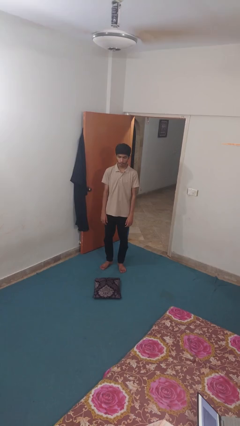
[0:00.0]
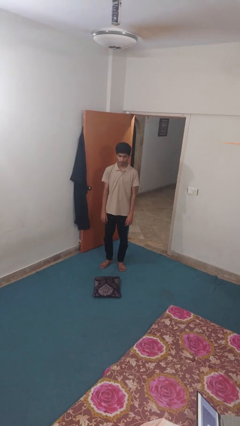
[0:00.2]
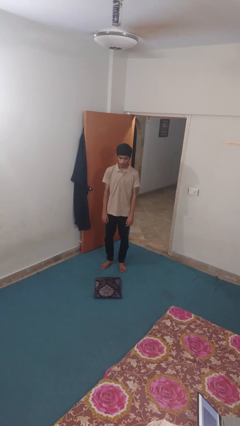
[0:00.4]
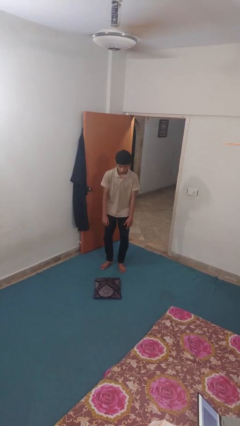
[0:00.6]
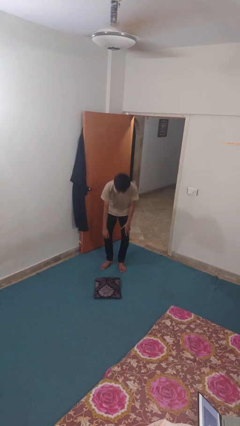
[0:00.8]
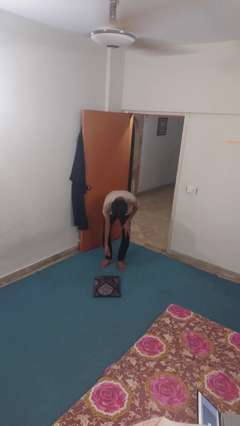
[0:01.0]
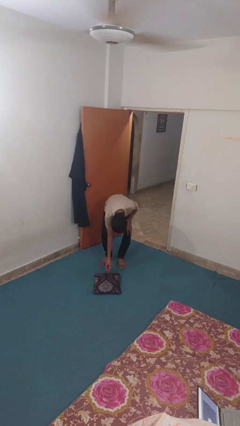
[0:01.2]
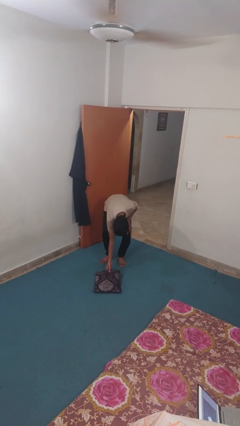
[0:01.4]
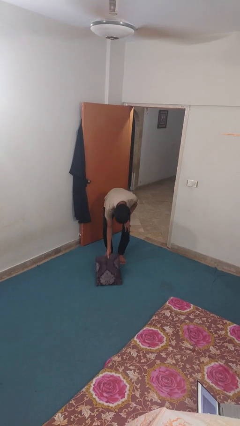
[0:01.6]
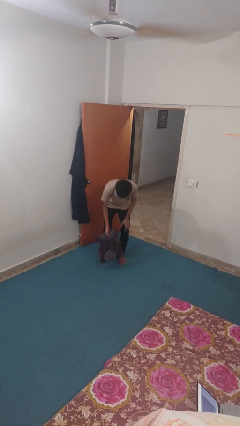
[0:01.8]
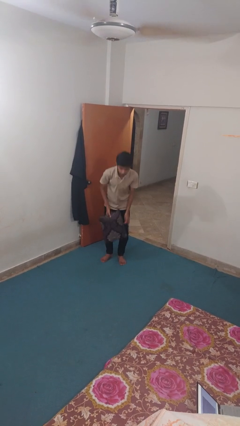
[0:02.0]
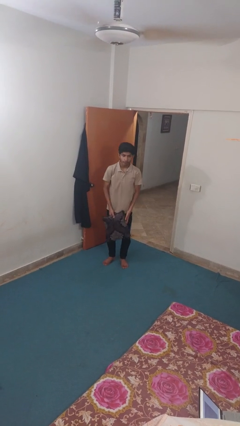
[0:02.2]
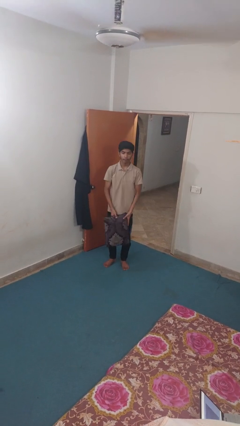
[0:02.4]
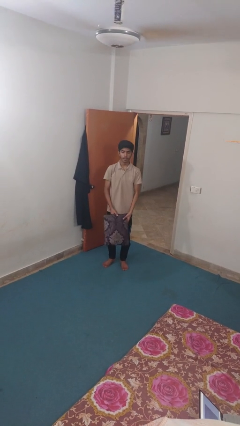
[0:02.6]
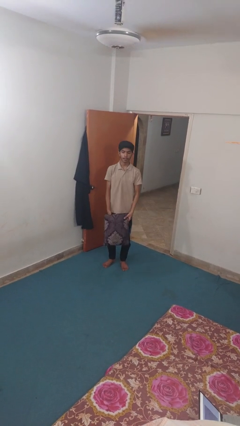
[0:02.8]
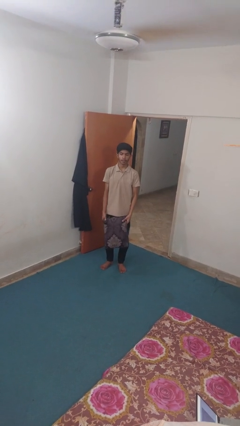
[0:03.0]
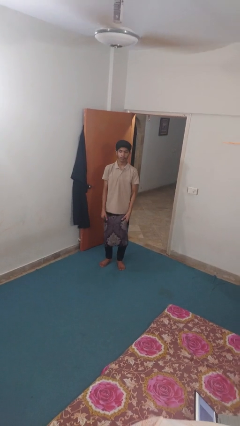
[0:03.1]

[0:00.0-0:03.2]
person picks up object from floor

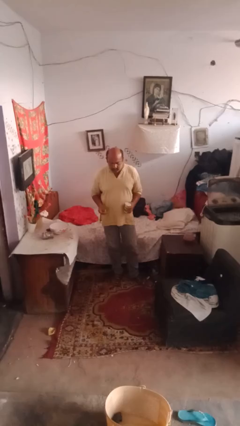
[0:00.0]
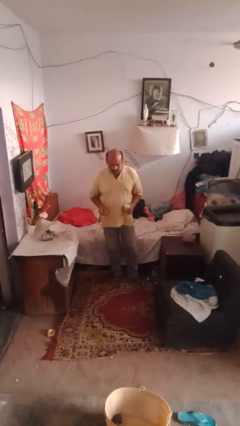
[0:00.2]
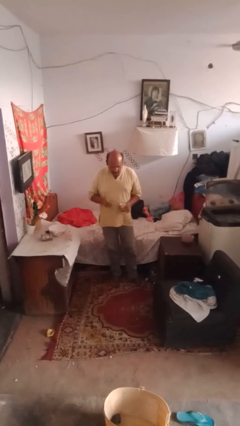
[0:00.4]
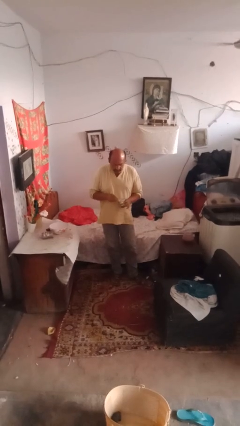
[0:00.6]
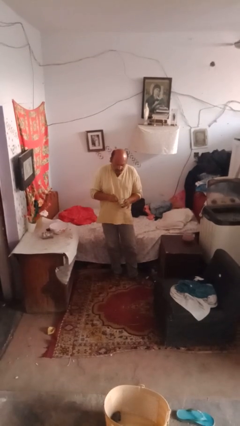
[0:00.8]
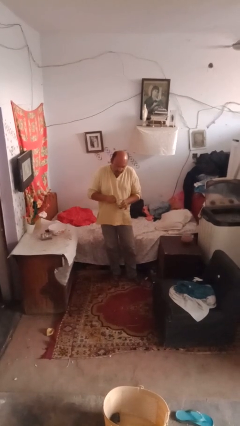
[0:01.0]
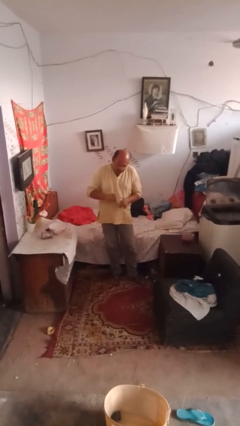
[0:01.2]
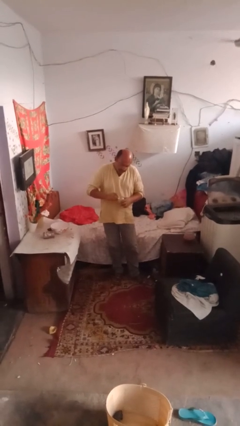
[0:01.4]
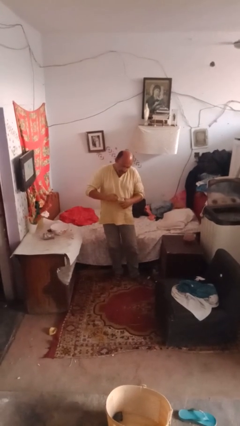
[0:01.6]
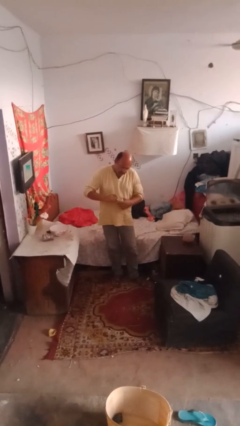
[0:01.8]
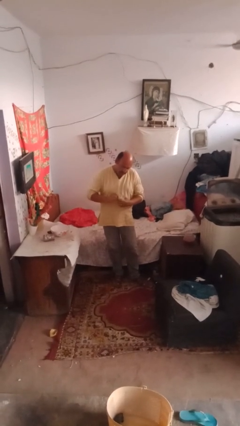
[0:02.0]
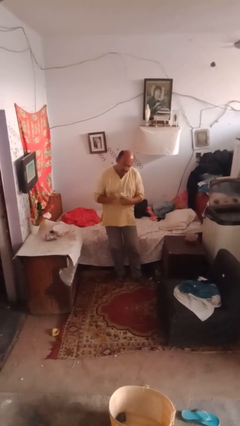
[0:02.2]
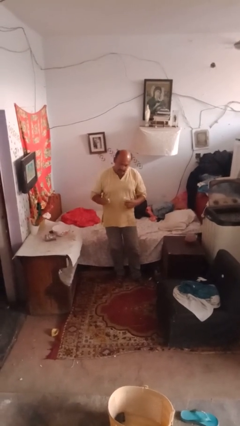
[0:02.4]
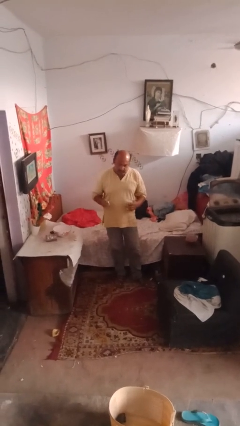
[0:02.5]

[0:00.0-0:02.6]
person opens can with can opener

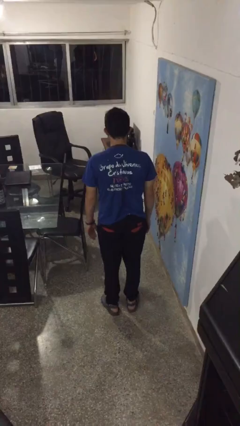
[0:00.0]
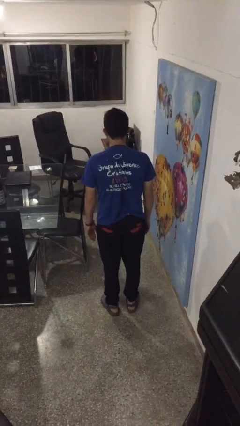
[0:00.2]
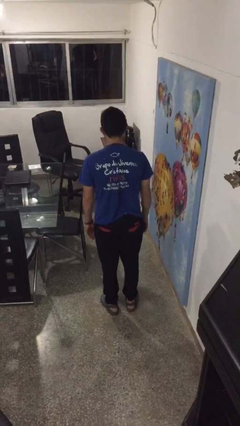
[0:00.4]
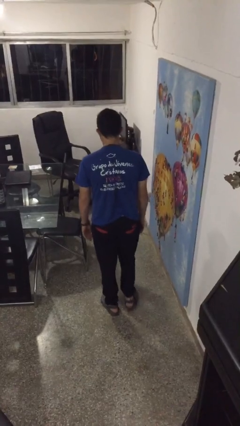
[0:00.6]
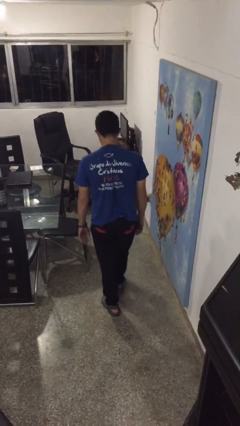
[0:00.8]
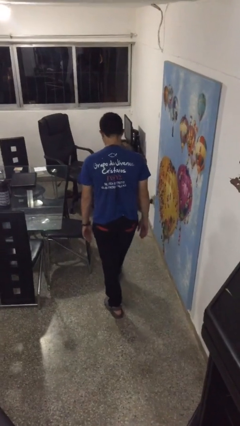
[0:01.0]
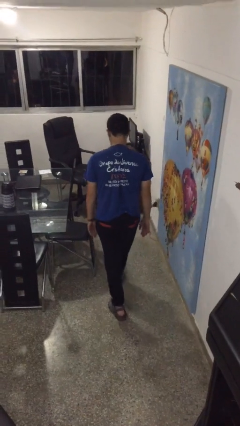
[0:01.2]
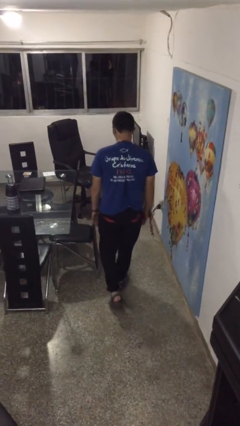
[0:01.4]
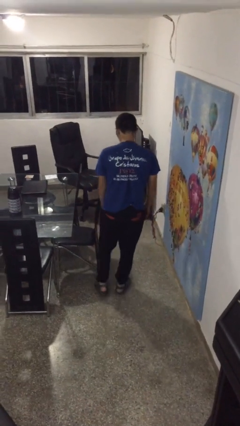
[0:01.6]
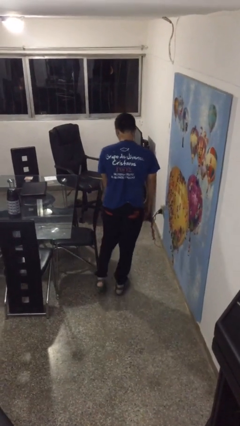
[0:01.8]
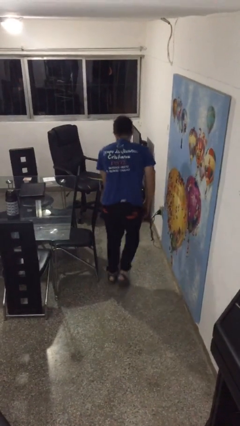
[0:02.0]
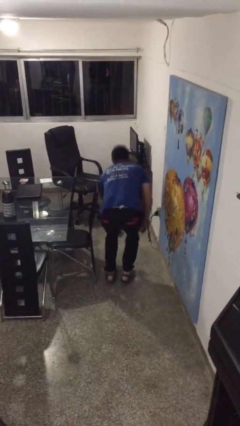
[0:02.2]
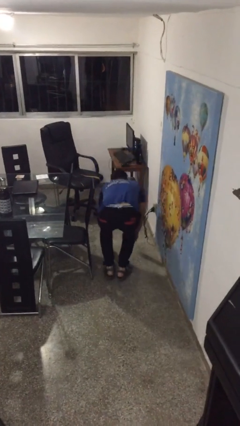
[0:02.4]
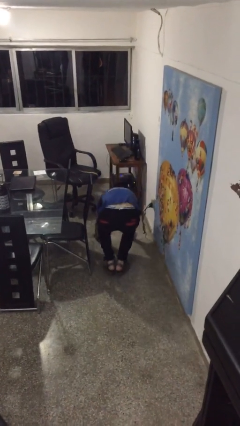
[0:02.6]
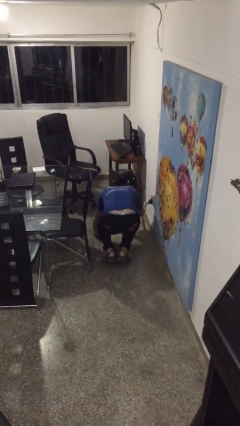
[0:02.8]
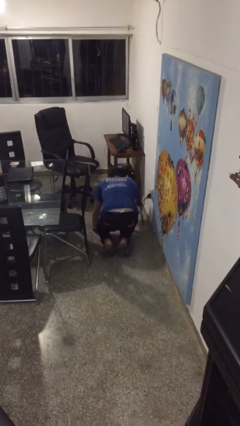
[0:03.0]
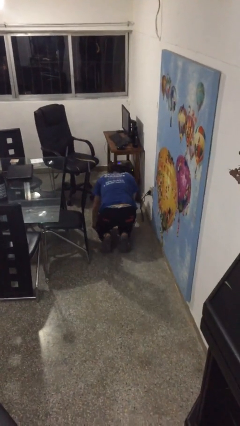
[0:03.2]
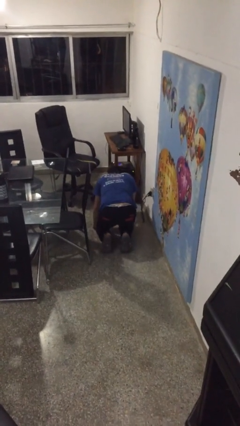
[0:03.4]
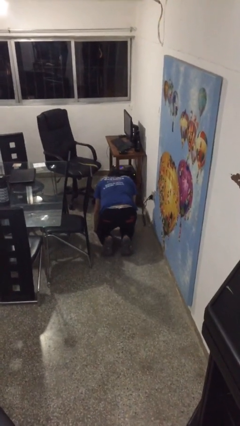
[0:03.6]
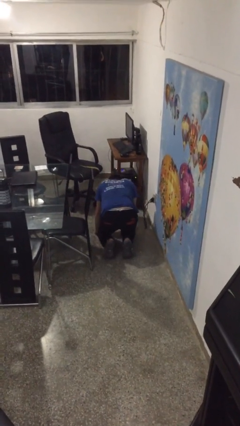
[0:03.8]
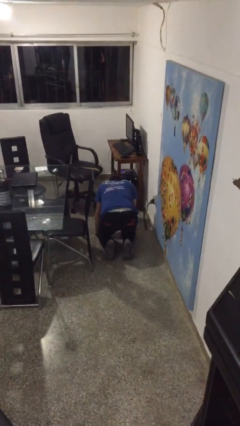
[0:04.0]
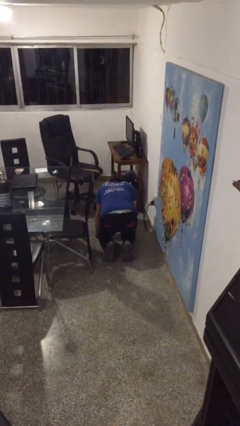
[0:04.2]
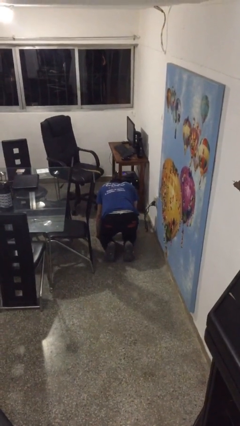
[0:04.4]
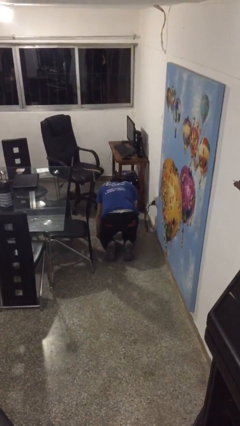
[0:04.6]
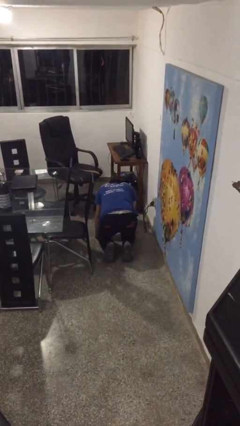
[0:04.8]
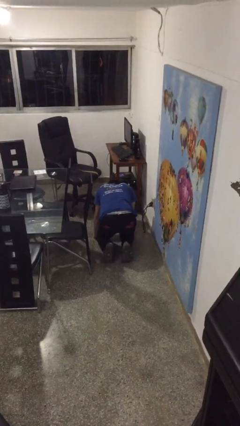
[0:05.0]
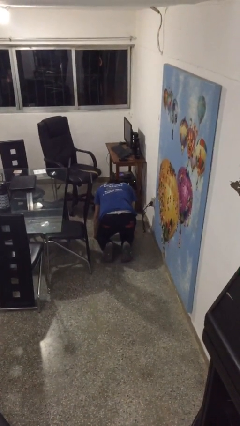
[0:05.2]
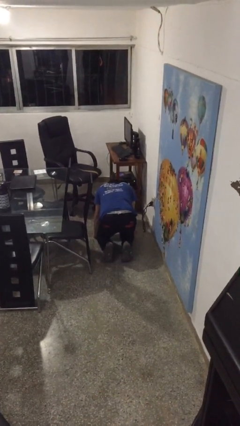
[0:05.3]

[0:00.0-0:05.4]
person trips on object on floor

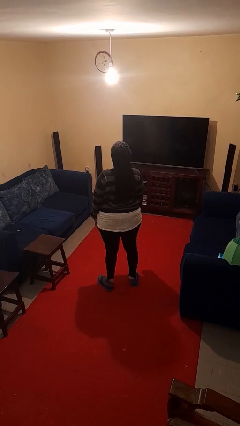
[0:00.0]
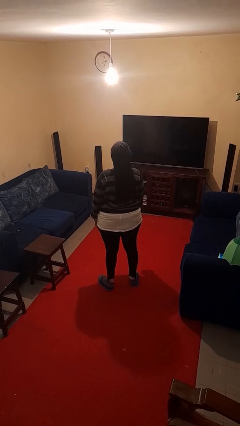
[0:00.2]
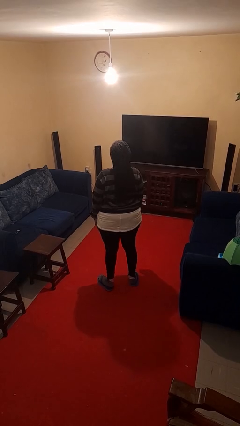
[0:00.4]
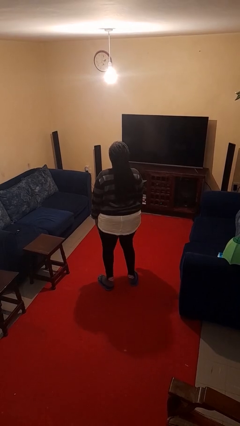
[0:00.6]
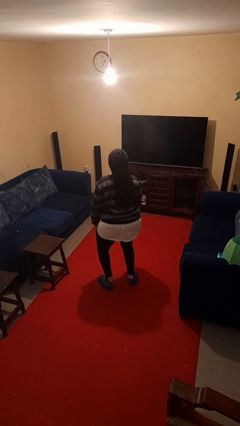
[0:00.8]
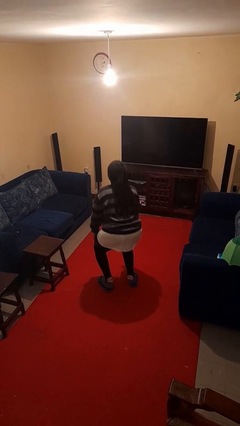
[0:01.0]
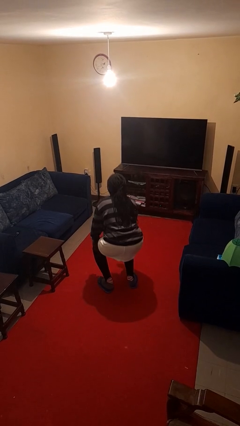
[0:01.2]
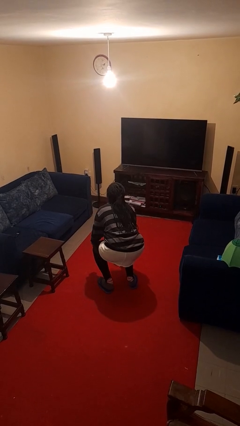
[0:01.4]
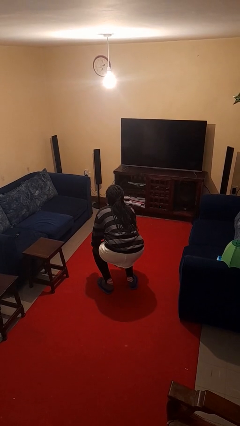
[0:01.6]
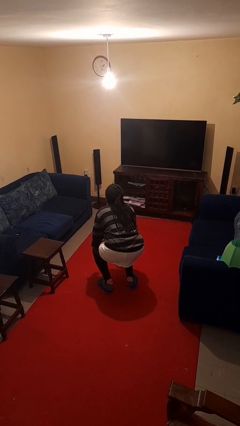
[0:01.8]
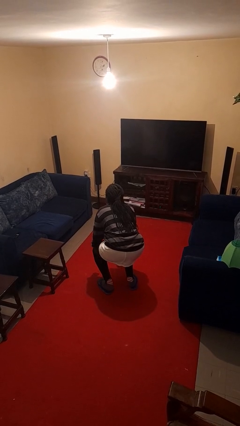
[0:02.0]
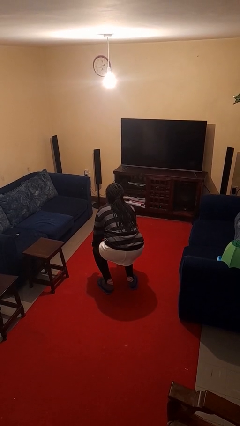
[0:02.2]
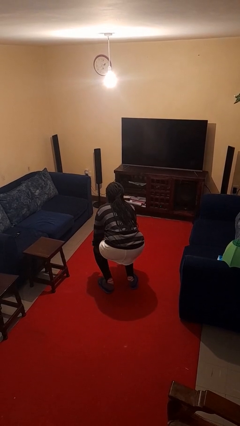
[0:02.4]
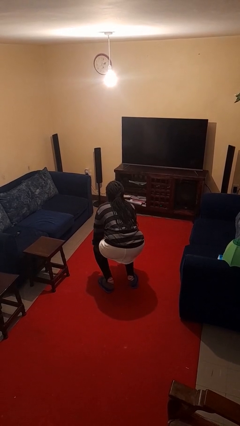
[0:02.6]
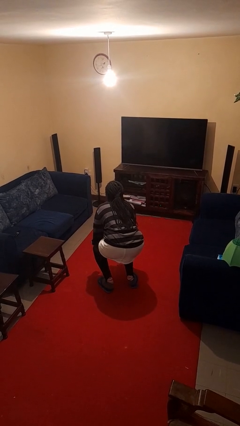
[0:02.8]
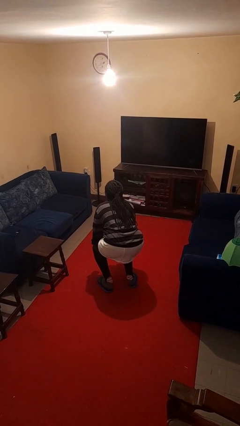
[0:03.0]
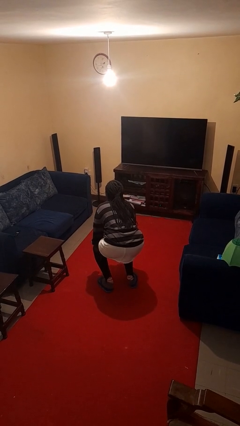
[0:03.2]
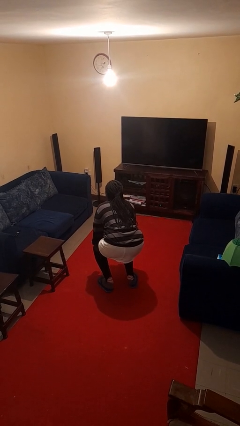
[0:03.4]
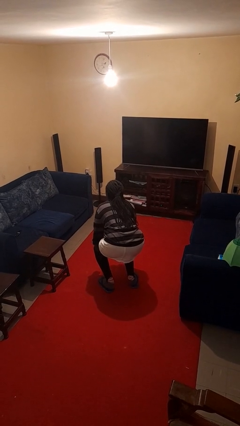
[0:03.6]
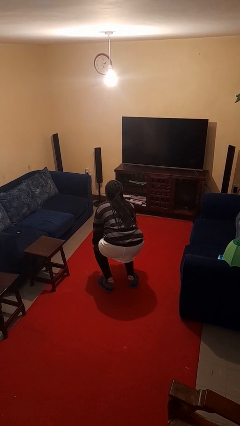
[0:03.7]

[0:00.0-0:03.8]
person squats

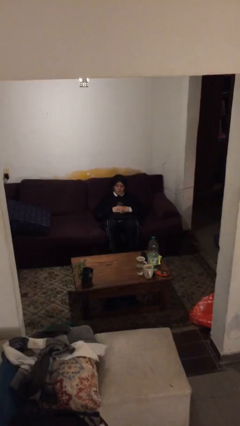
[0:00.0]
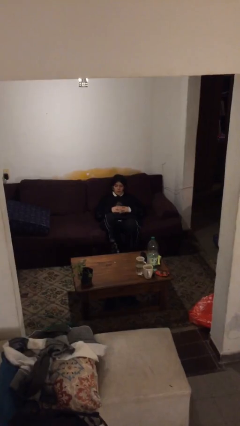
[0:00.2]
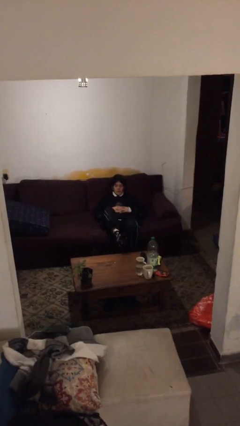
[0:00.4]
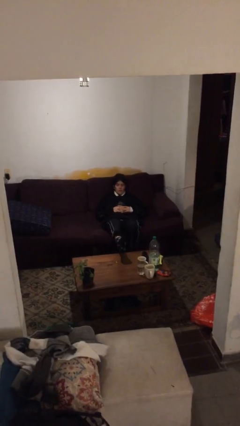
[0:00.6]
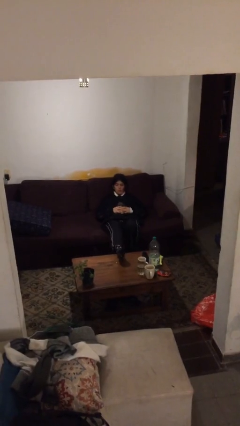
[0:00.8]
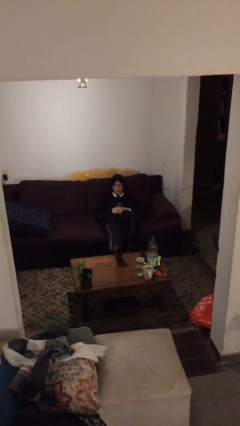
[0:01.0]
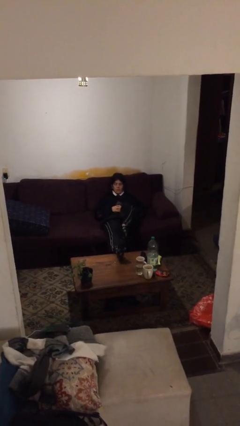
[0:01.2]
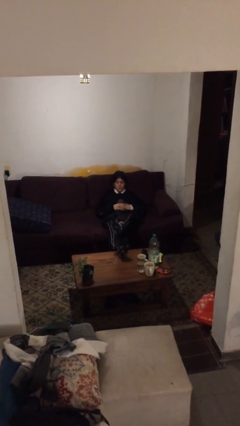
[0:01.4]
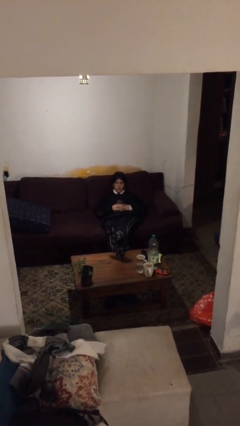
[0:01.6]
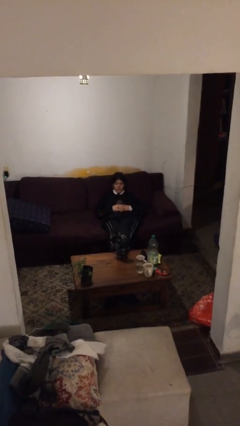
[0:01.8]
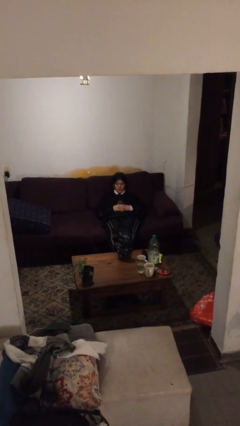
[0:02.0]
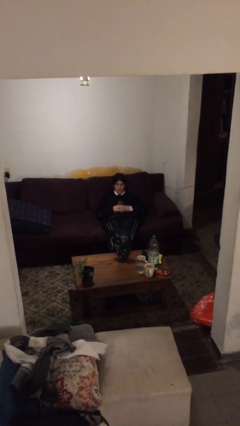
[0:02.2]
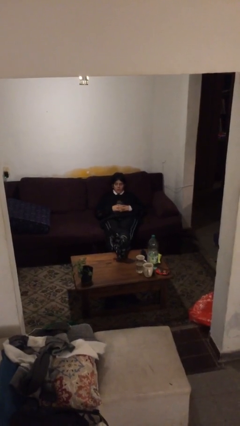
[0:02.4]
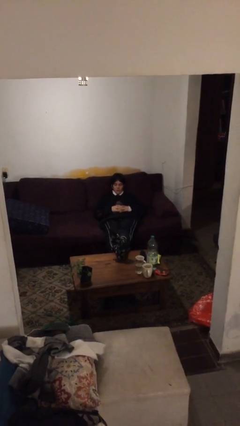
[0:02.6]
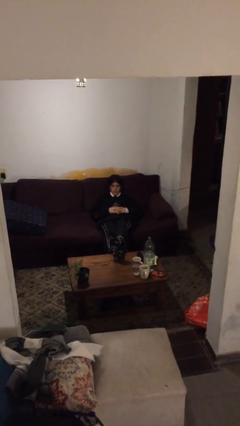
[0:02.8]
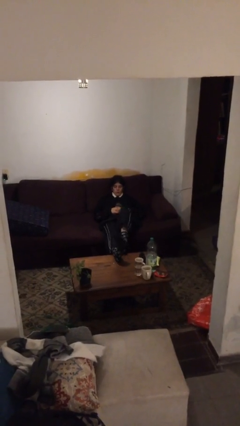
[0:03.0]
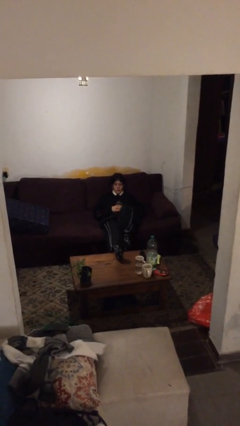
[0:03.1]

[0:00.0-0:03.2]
person puts feet up
